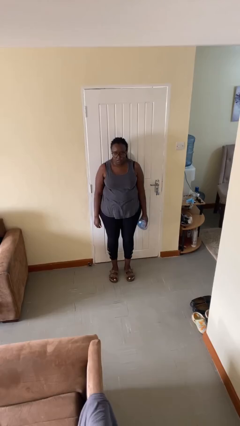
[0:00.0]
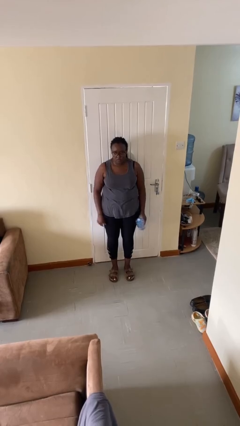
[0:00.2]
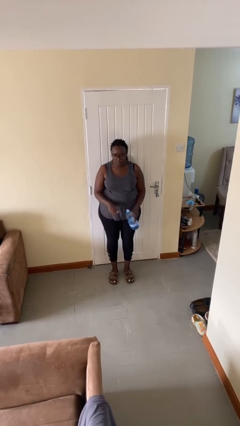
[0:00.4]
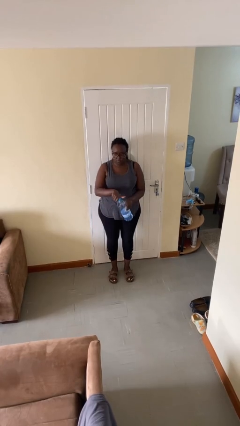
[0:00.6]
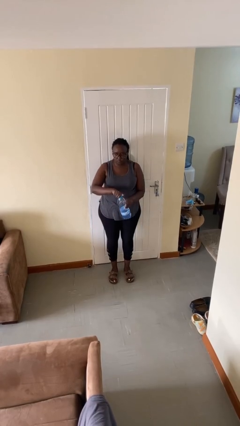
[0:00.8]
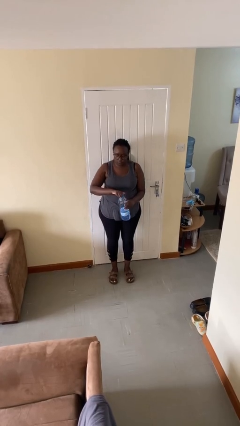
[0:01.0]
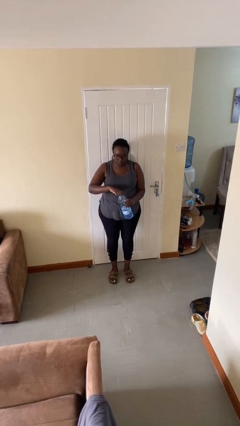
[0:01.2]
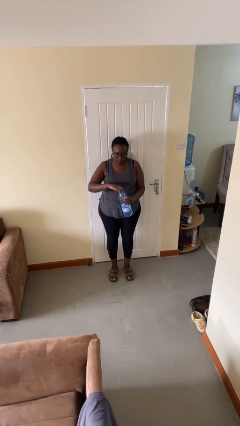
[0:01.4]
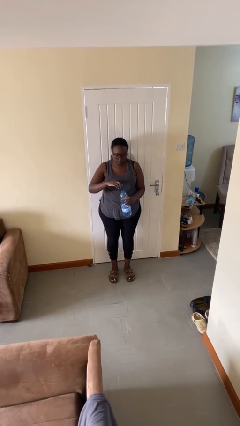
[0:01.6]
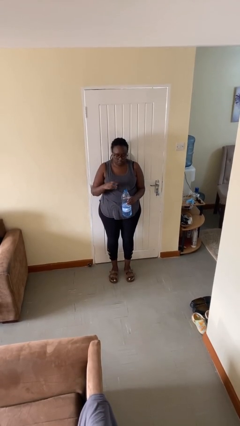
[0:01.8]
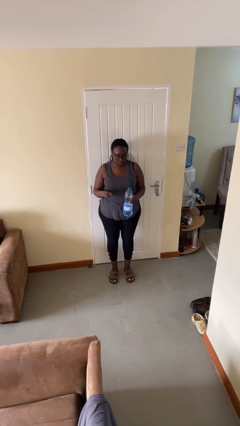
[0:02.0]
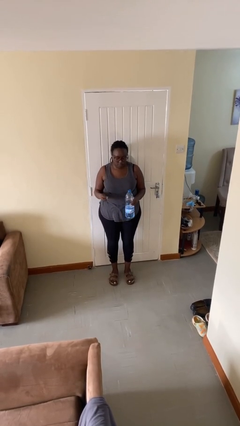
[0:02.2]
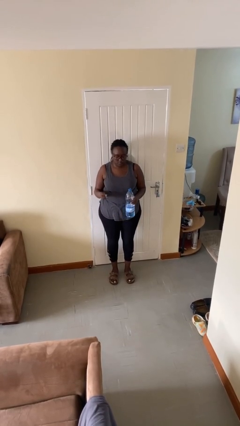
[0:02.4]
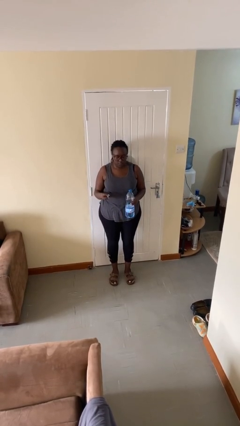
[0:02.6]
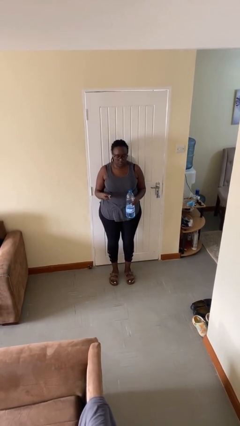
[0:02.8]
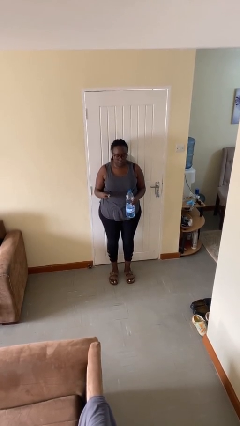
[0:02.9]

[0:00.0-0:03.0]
person unscrews lid from bottle

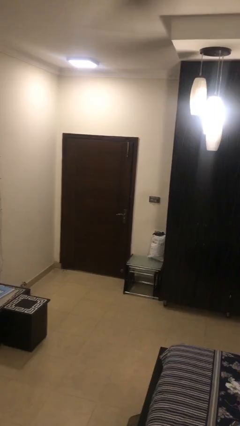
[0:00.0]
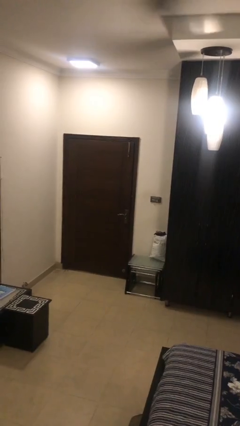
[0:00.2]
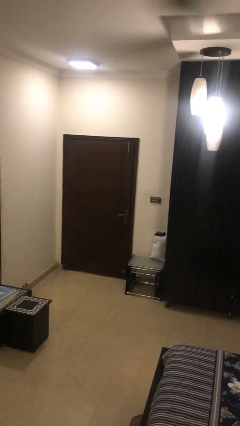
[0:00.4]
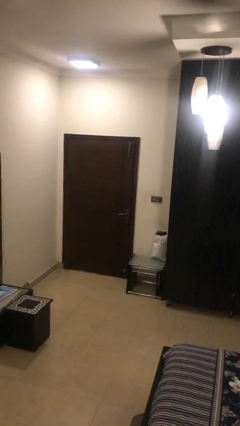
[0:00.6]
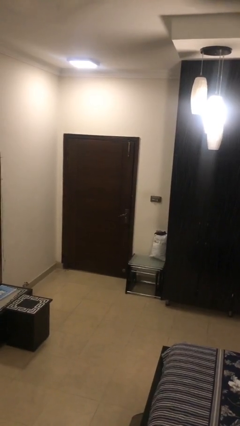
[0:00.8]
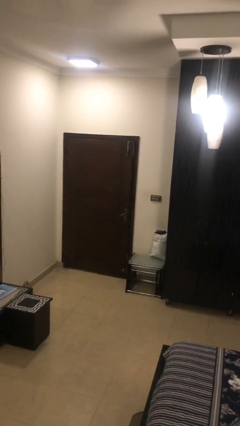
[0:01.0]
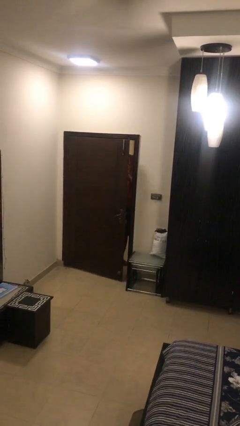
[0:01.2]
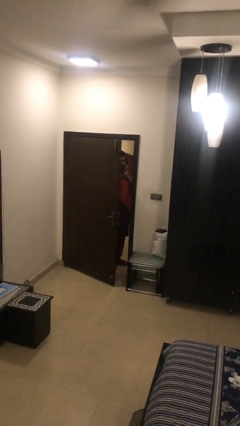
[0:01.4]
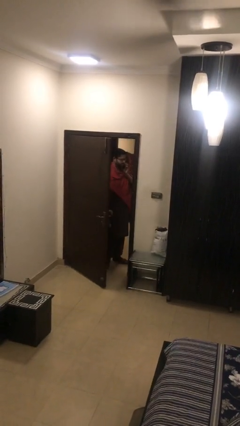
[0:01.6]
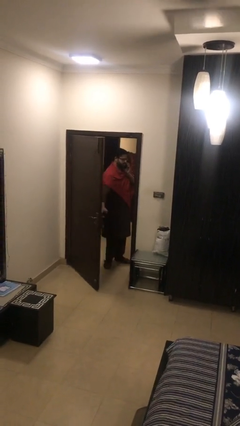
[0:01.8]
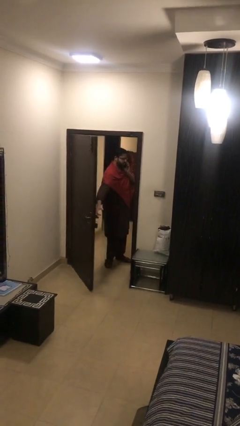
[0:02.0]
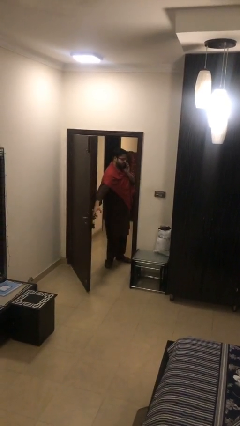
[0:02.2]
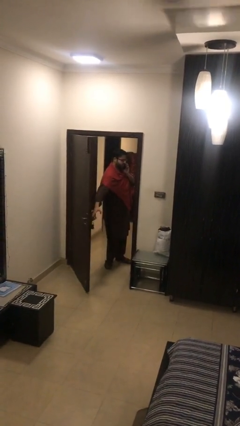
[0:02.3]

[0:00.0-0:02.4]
person opens facility door

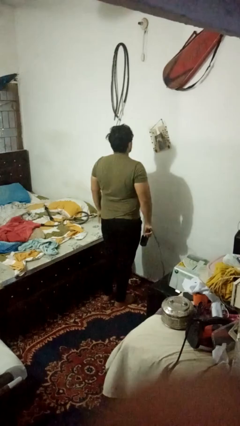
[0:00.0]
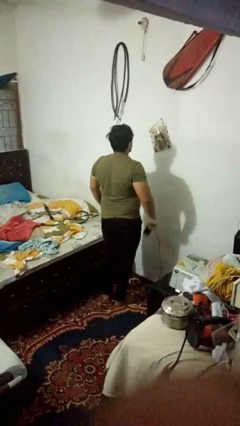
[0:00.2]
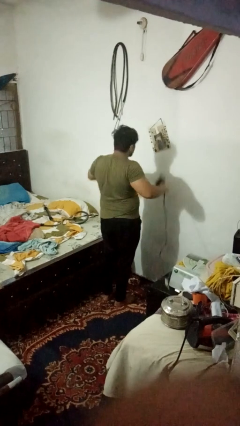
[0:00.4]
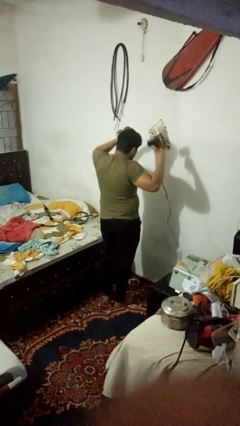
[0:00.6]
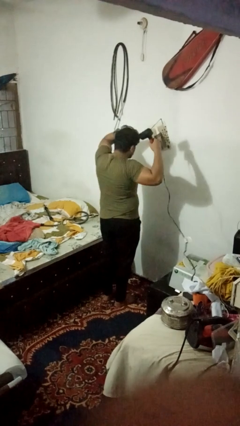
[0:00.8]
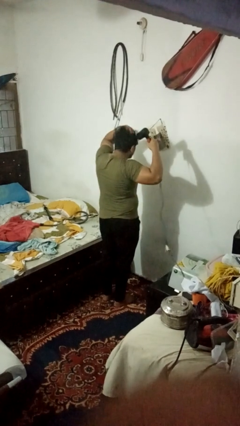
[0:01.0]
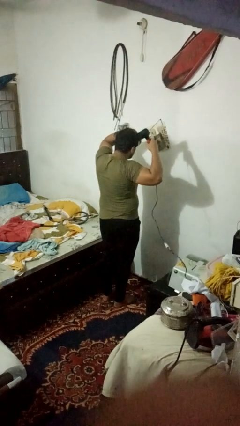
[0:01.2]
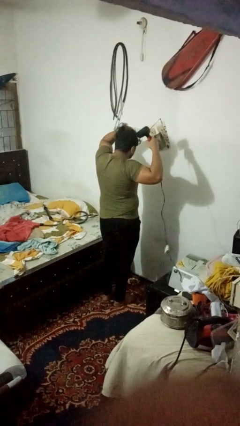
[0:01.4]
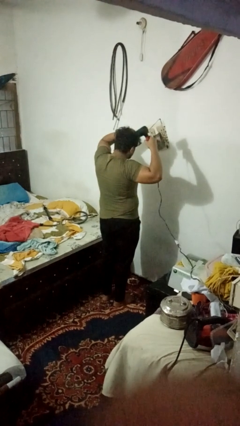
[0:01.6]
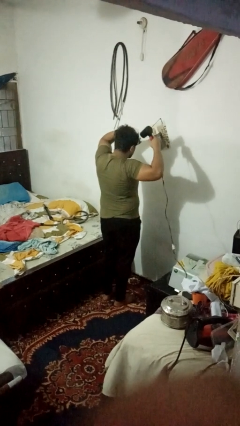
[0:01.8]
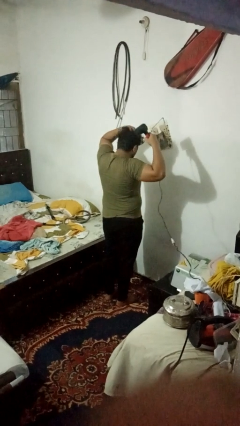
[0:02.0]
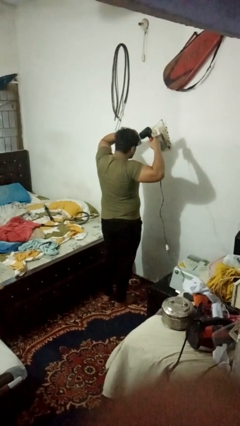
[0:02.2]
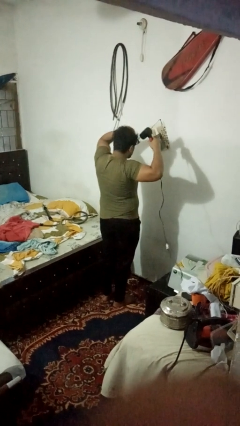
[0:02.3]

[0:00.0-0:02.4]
person dries hair with hairdryer

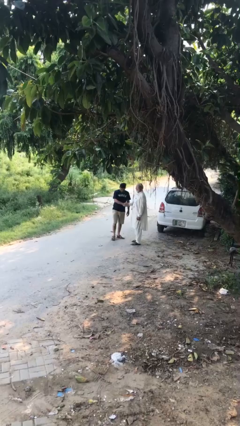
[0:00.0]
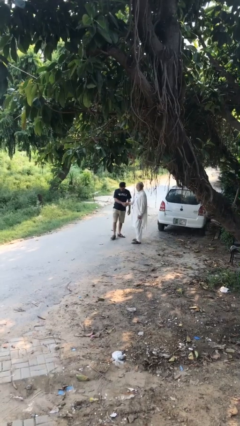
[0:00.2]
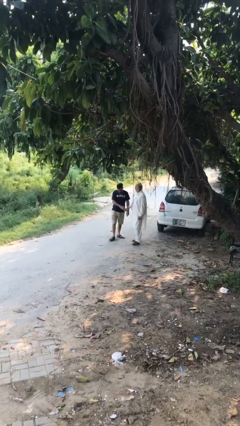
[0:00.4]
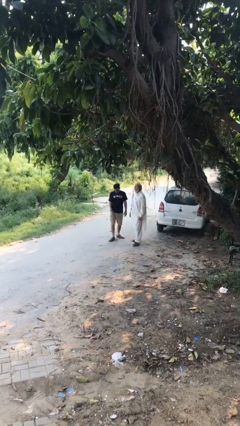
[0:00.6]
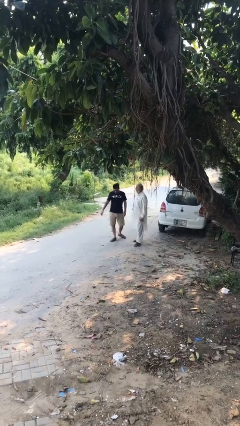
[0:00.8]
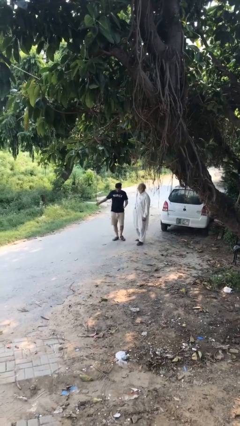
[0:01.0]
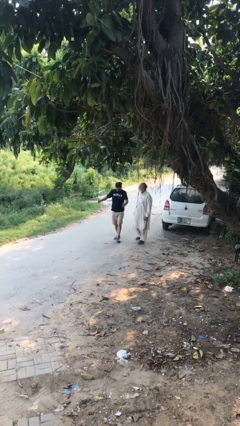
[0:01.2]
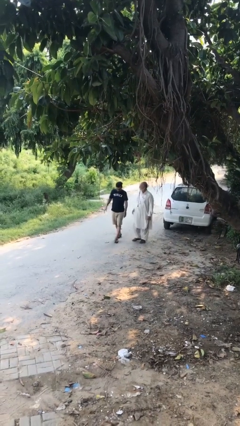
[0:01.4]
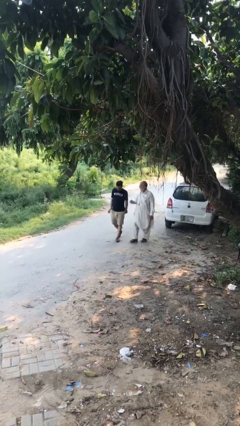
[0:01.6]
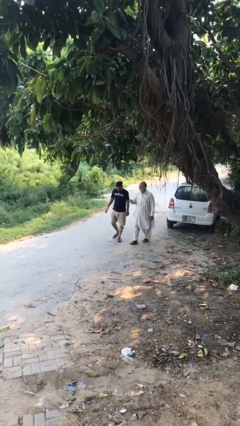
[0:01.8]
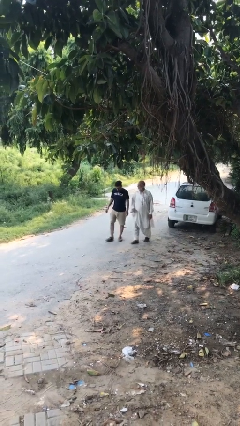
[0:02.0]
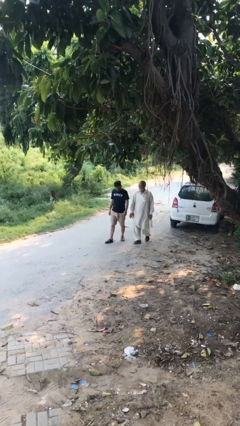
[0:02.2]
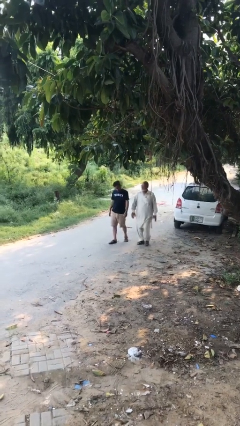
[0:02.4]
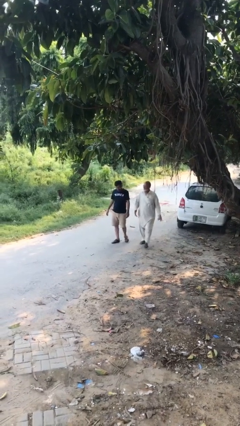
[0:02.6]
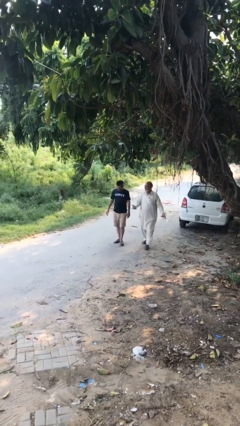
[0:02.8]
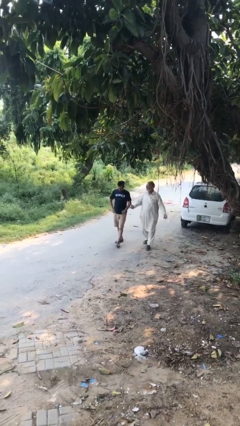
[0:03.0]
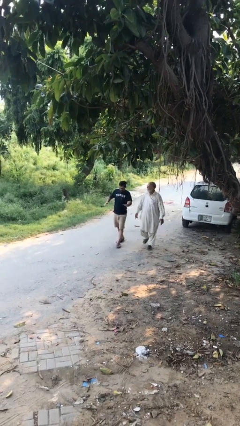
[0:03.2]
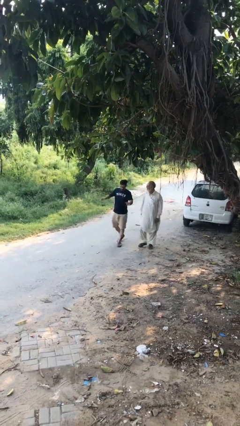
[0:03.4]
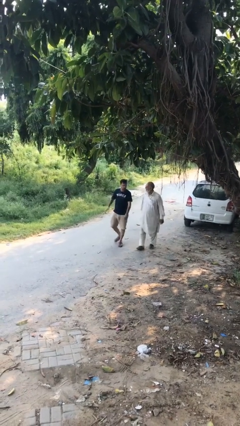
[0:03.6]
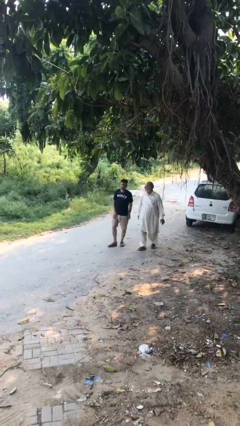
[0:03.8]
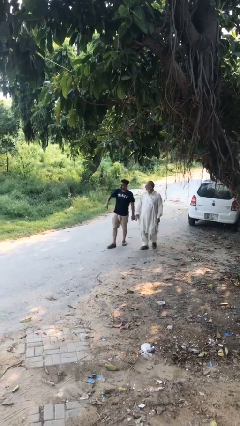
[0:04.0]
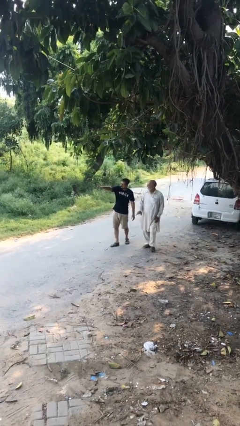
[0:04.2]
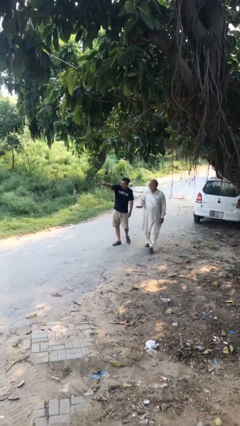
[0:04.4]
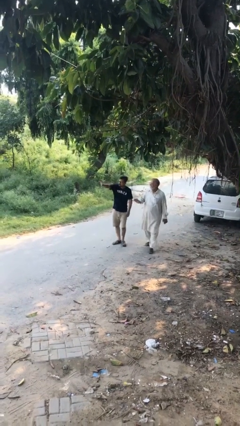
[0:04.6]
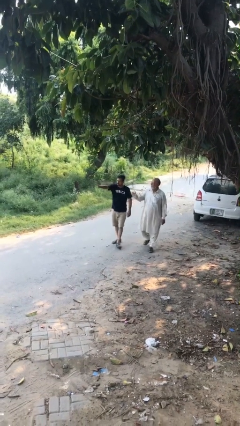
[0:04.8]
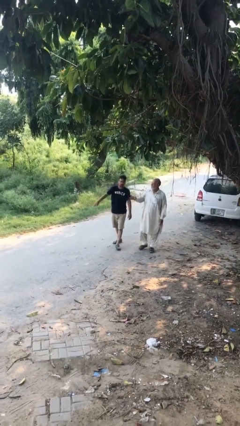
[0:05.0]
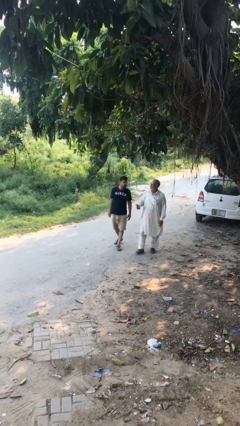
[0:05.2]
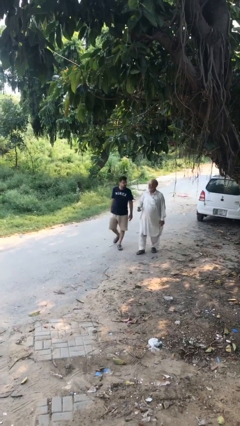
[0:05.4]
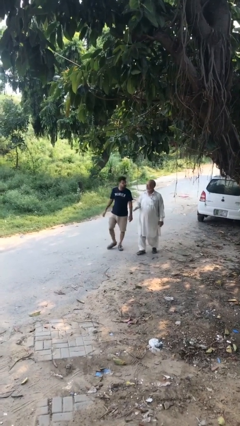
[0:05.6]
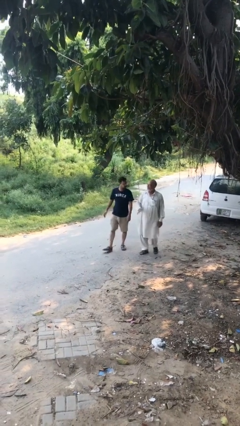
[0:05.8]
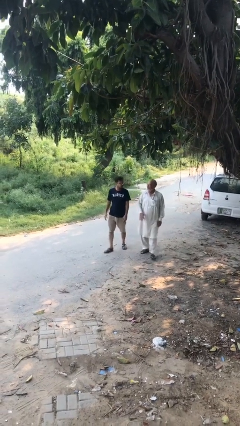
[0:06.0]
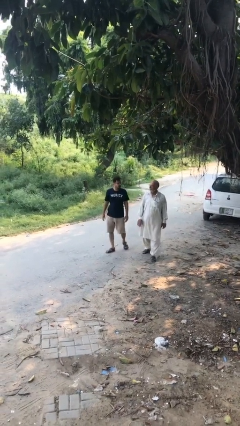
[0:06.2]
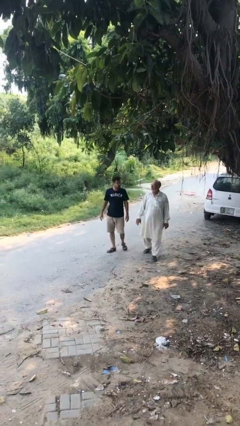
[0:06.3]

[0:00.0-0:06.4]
person talks to person

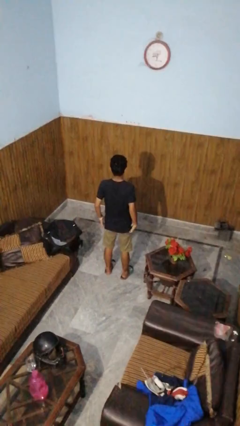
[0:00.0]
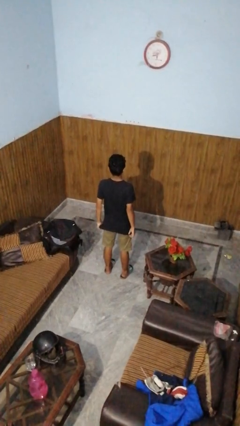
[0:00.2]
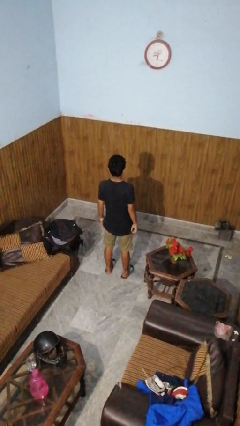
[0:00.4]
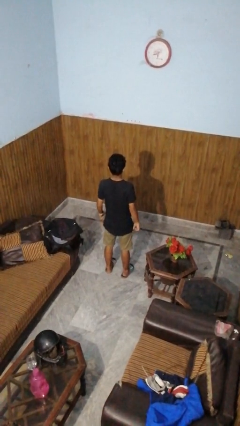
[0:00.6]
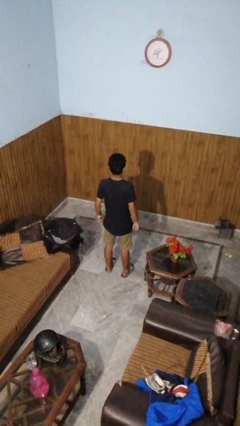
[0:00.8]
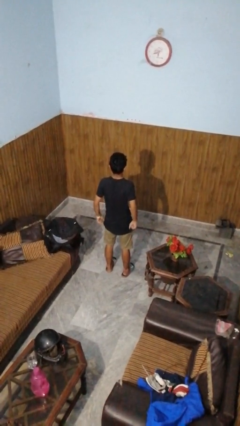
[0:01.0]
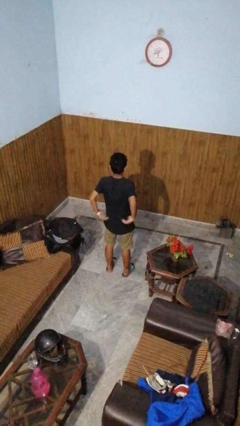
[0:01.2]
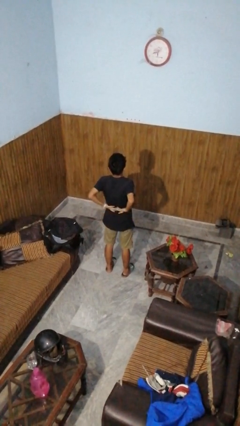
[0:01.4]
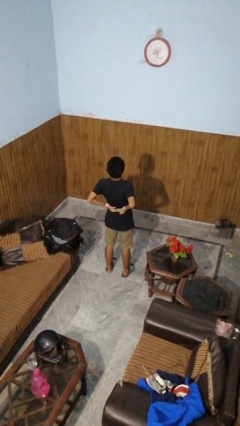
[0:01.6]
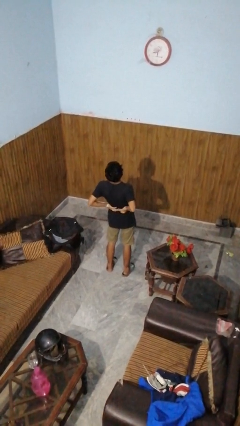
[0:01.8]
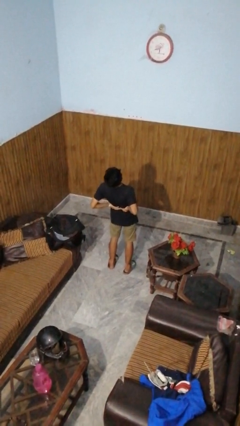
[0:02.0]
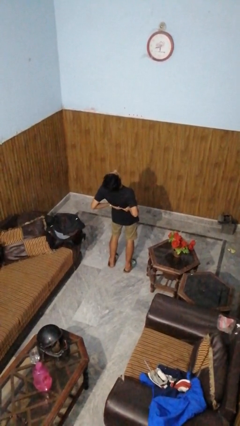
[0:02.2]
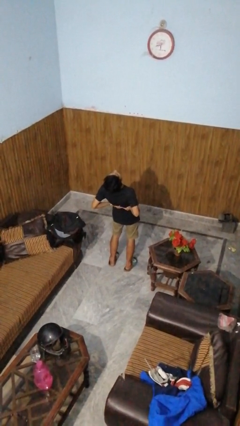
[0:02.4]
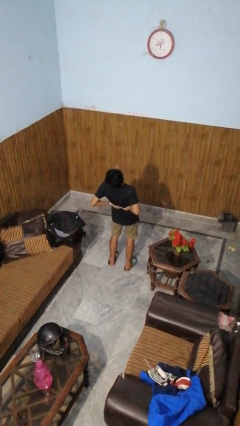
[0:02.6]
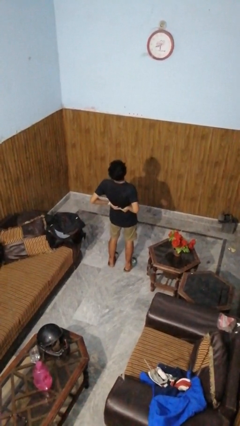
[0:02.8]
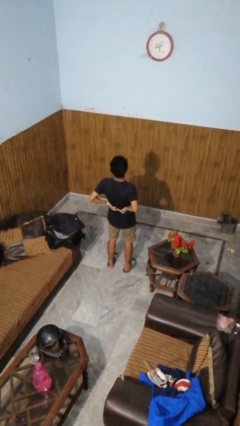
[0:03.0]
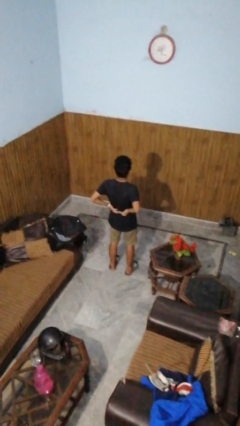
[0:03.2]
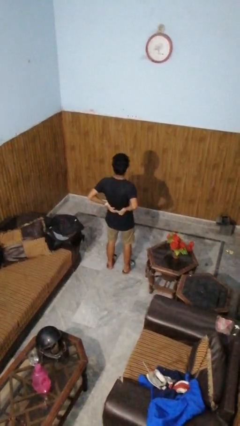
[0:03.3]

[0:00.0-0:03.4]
person stretches back
